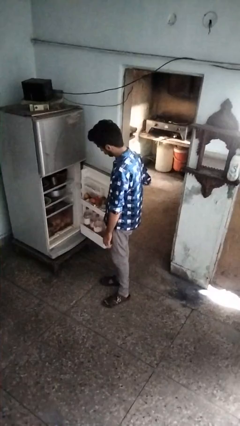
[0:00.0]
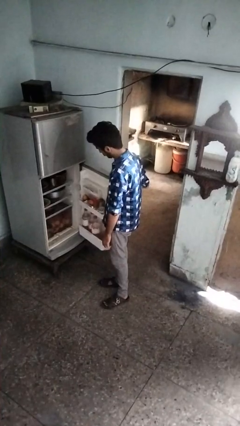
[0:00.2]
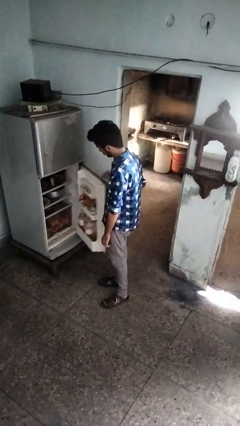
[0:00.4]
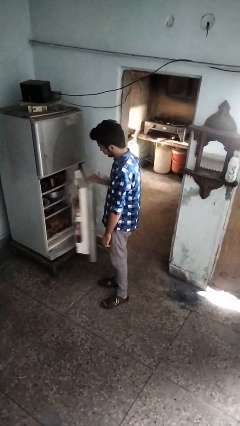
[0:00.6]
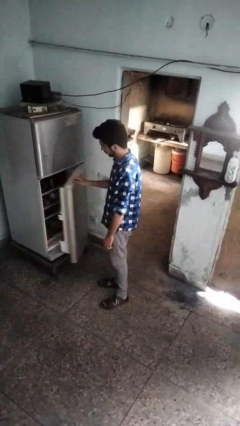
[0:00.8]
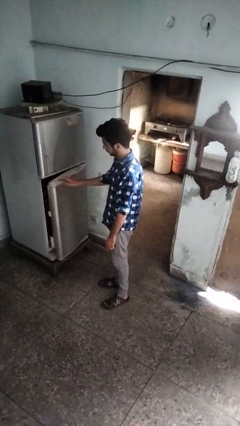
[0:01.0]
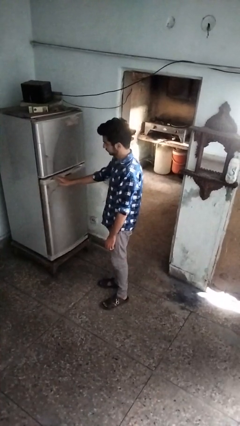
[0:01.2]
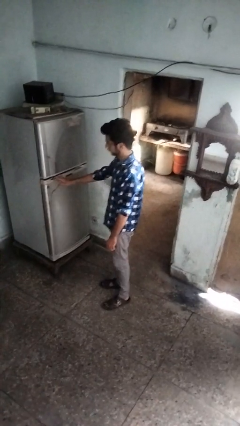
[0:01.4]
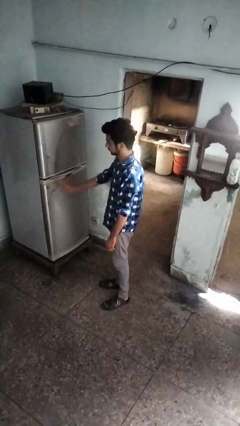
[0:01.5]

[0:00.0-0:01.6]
person closes refrigerator

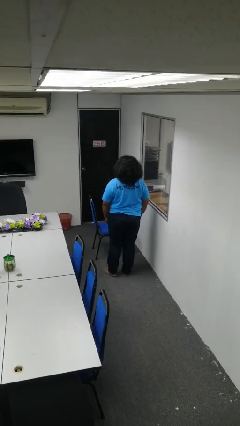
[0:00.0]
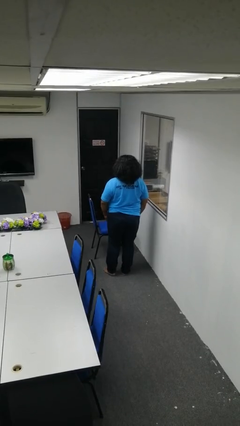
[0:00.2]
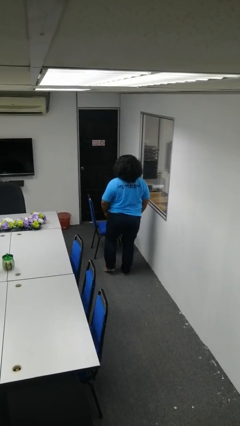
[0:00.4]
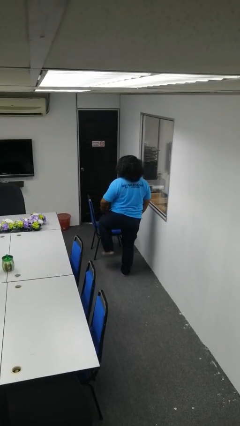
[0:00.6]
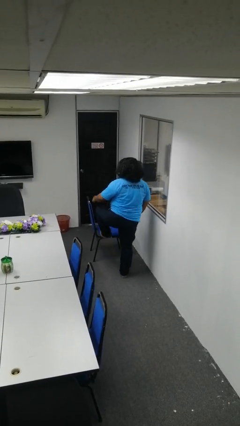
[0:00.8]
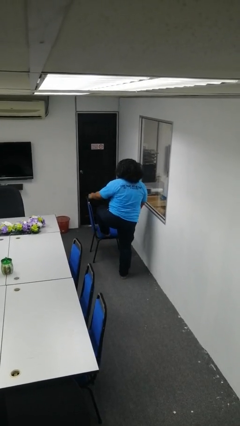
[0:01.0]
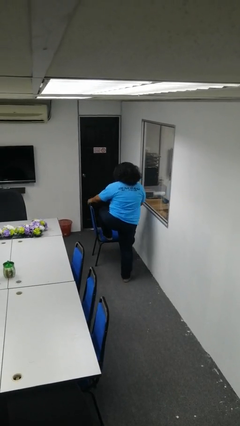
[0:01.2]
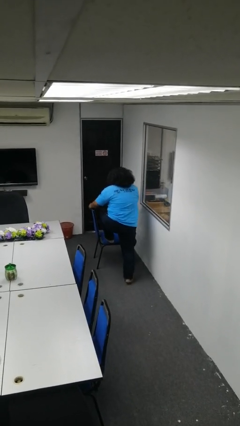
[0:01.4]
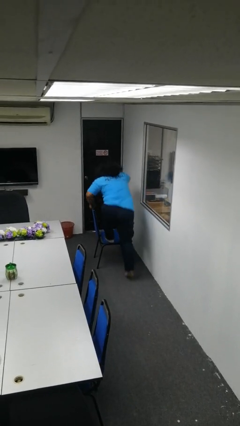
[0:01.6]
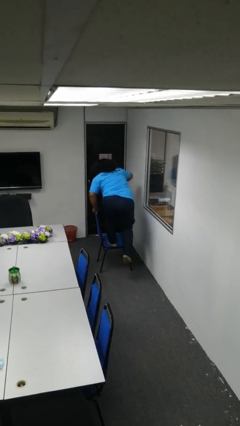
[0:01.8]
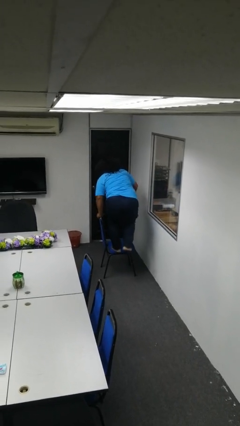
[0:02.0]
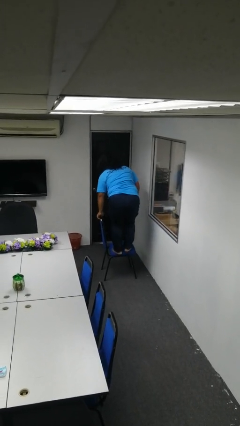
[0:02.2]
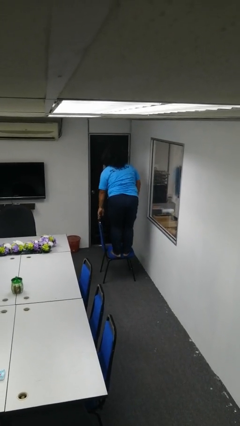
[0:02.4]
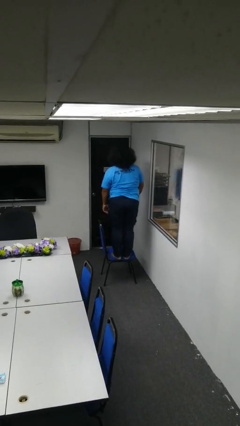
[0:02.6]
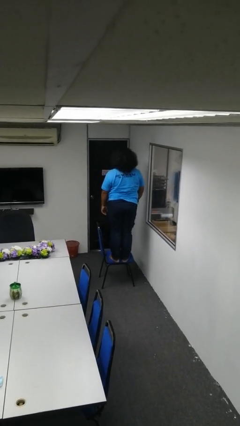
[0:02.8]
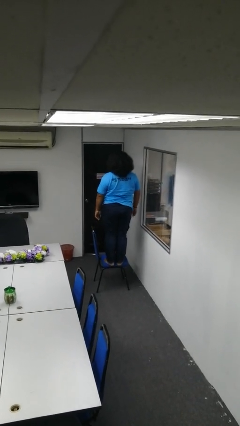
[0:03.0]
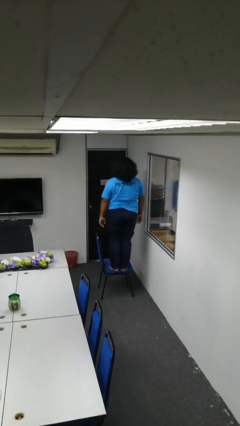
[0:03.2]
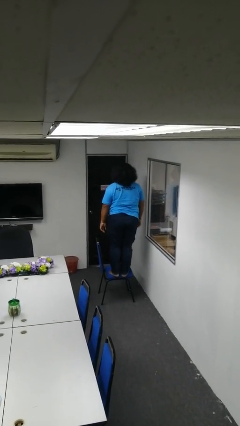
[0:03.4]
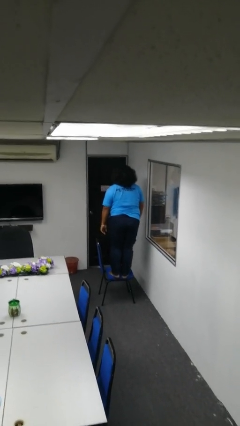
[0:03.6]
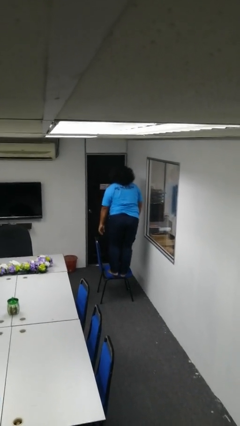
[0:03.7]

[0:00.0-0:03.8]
person climbs on chair

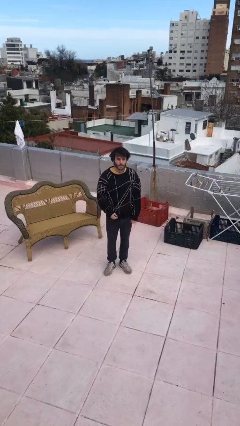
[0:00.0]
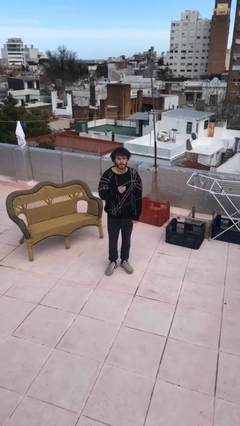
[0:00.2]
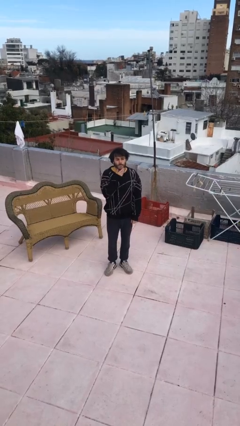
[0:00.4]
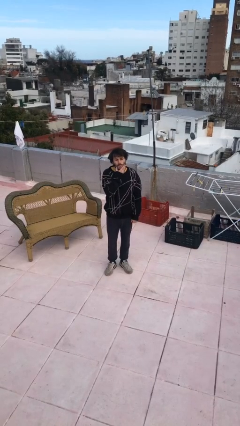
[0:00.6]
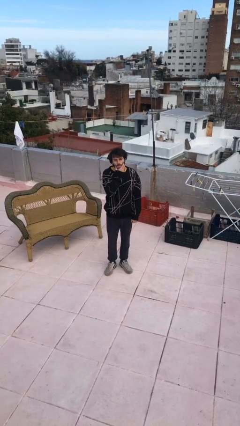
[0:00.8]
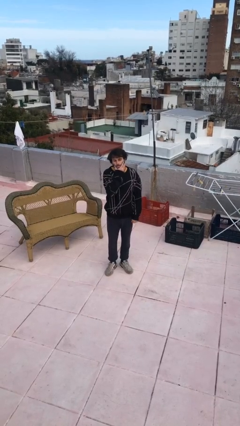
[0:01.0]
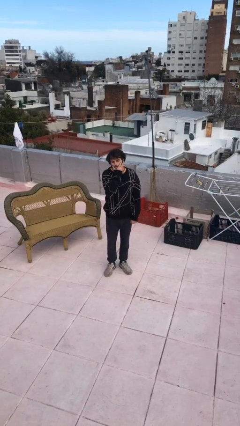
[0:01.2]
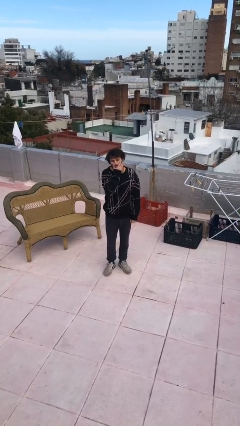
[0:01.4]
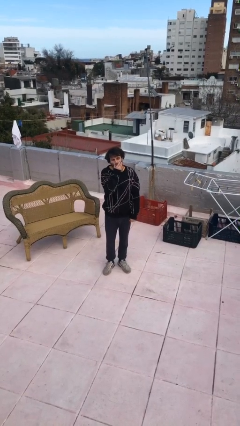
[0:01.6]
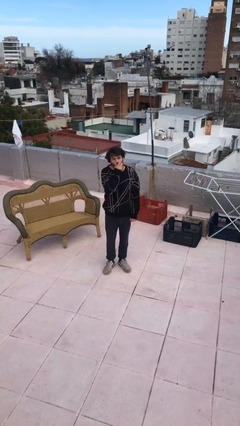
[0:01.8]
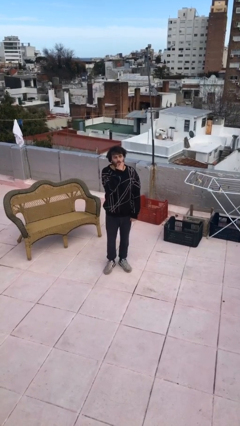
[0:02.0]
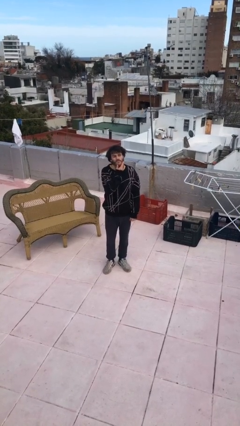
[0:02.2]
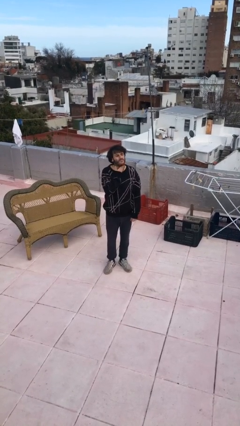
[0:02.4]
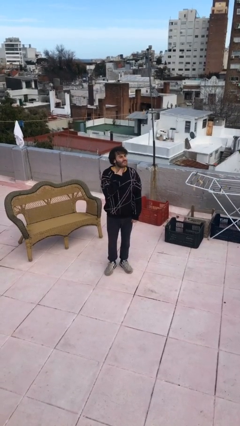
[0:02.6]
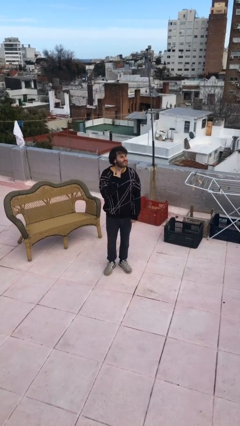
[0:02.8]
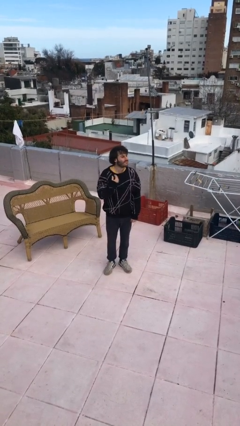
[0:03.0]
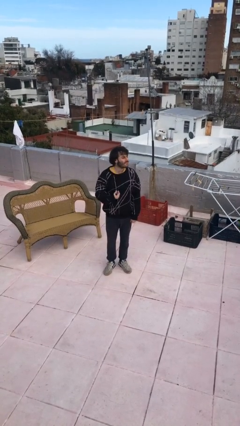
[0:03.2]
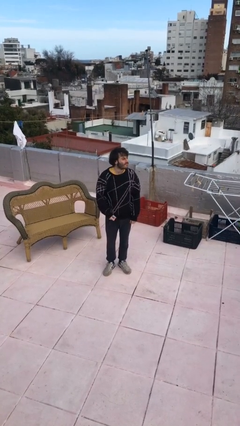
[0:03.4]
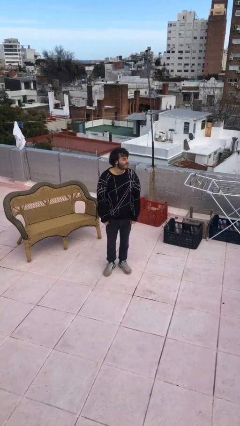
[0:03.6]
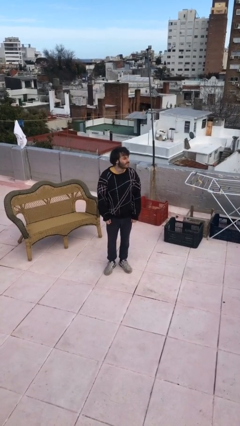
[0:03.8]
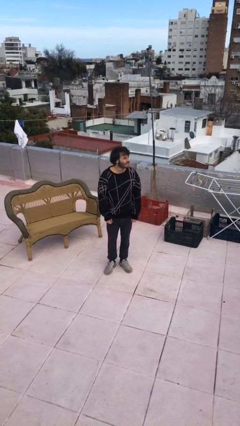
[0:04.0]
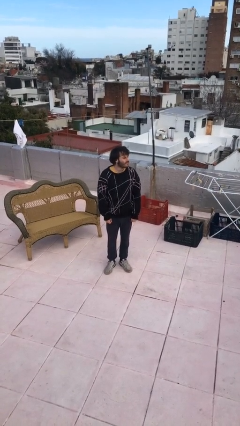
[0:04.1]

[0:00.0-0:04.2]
person scratches face

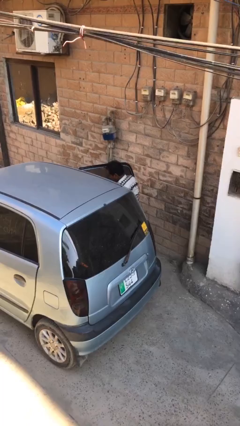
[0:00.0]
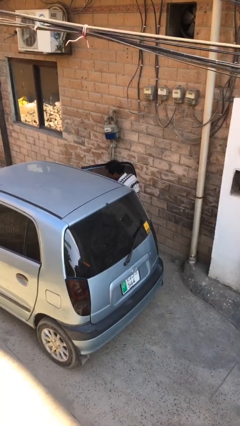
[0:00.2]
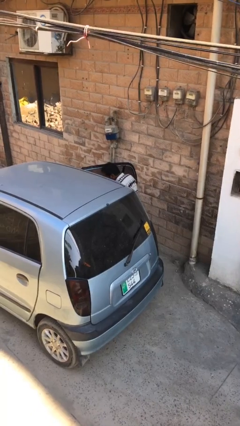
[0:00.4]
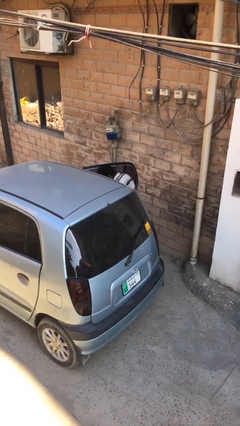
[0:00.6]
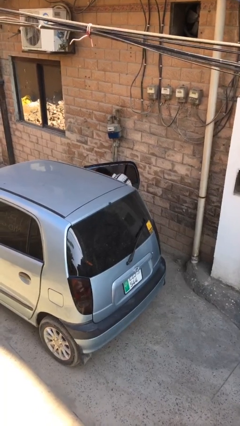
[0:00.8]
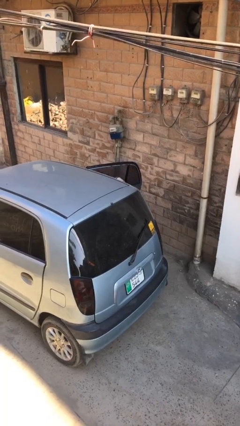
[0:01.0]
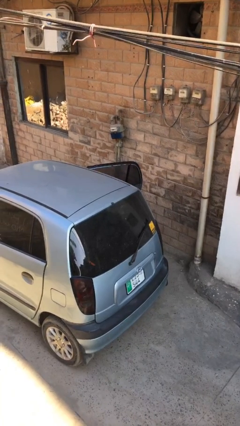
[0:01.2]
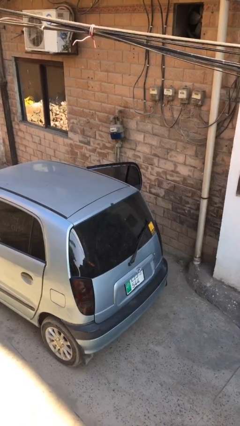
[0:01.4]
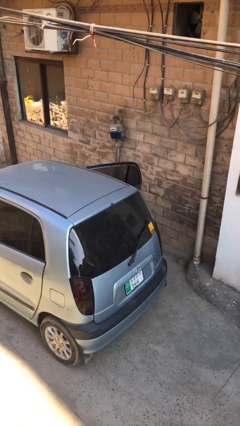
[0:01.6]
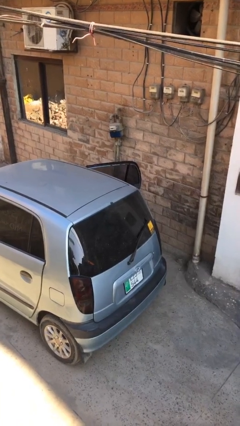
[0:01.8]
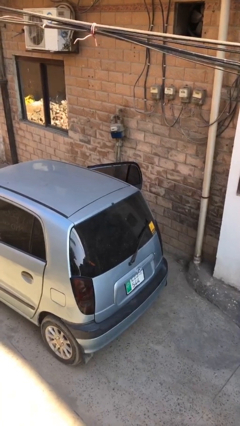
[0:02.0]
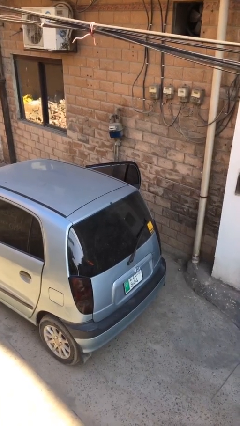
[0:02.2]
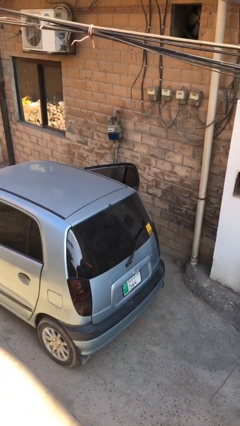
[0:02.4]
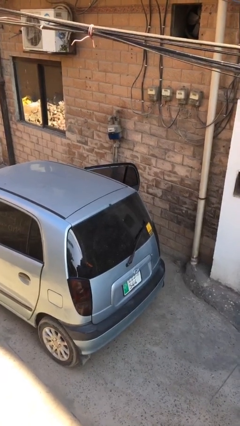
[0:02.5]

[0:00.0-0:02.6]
person enters car

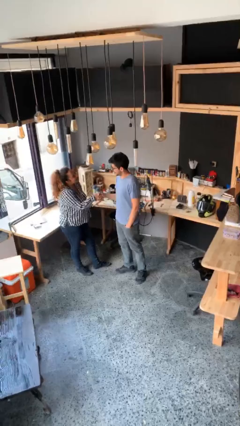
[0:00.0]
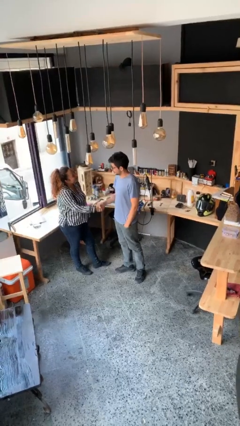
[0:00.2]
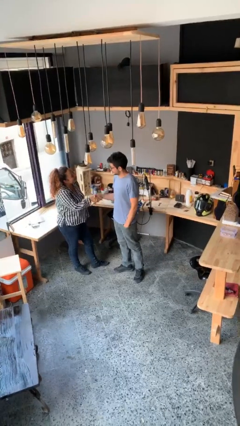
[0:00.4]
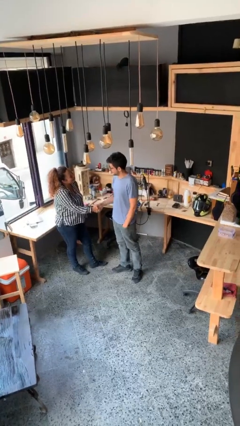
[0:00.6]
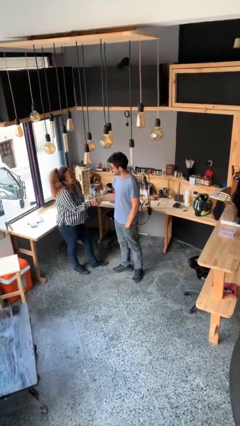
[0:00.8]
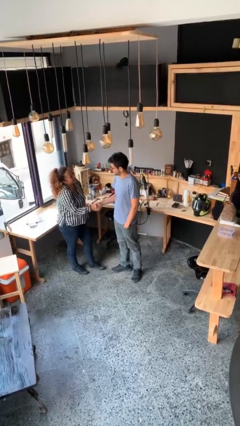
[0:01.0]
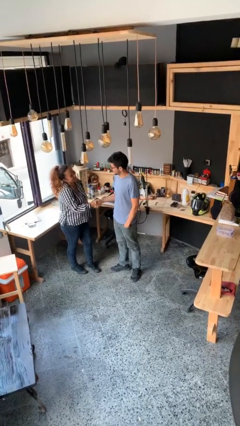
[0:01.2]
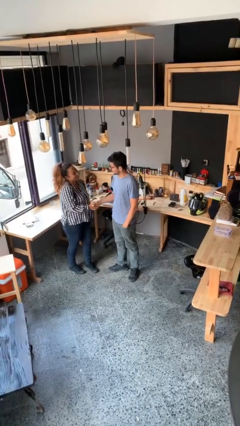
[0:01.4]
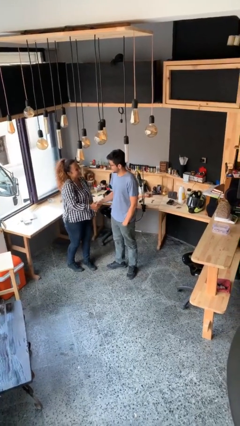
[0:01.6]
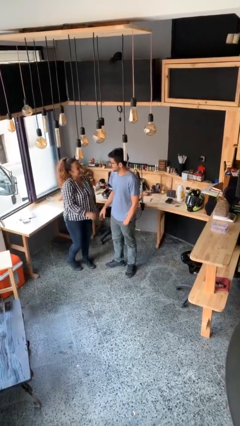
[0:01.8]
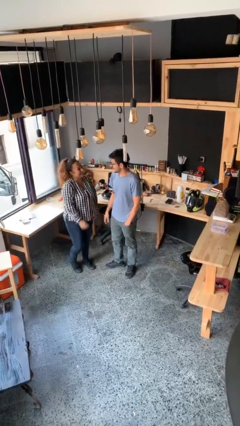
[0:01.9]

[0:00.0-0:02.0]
person shakes hand

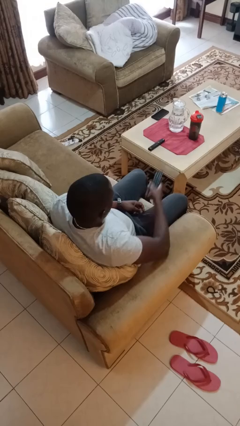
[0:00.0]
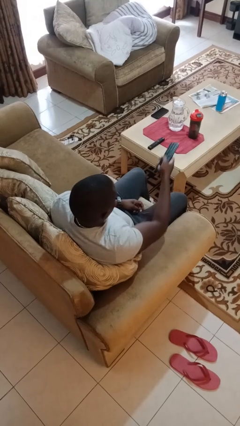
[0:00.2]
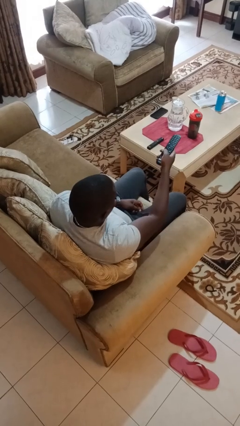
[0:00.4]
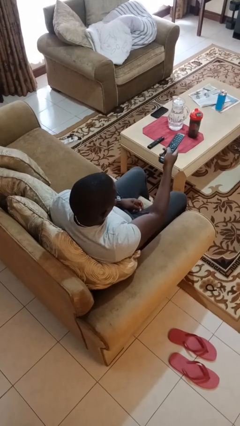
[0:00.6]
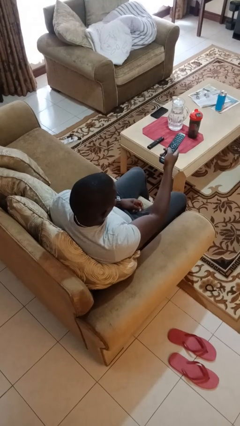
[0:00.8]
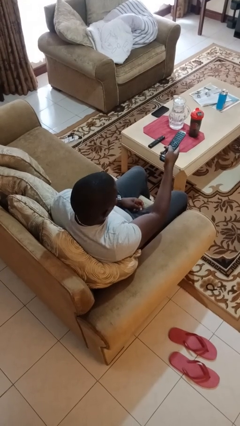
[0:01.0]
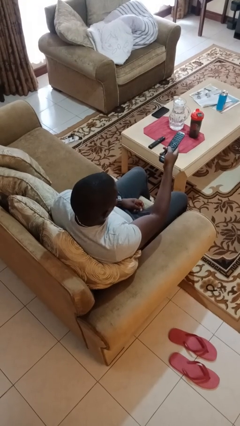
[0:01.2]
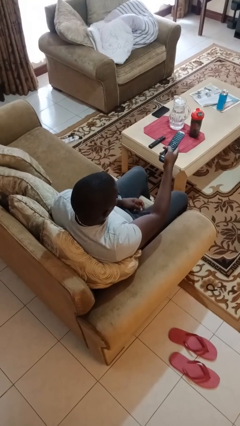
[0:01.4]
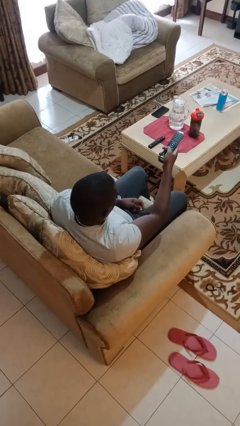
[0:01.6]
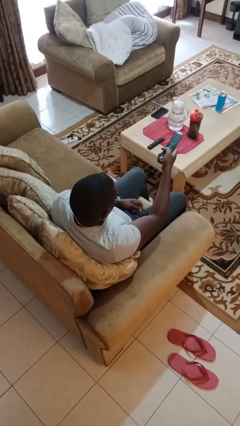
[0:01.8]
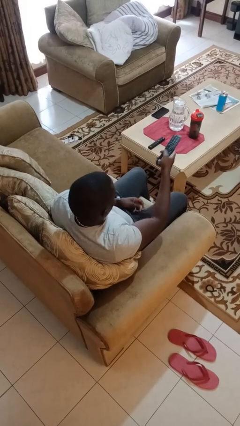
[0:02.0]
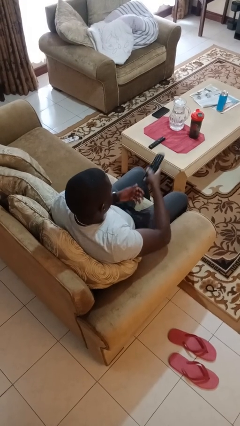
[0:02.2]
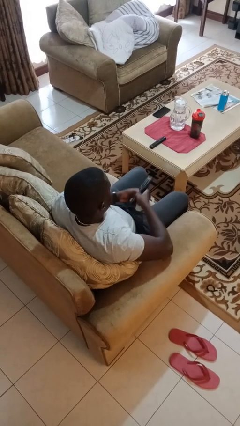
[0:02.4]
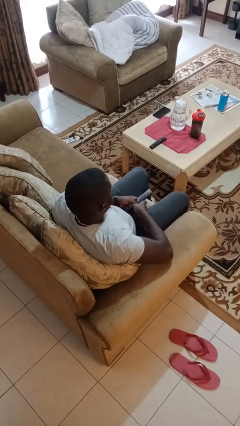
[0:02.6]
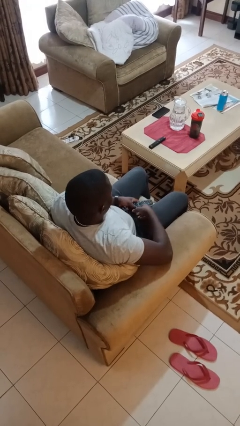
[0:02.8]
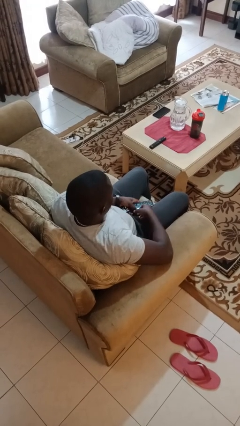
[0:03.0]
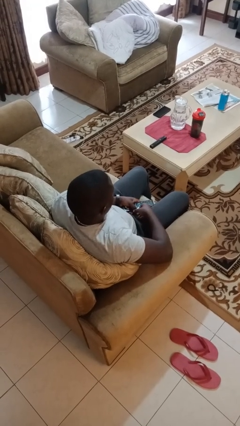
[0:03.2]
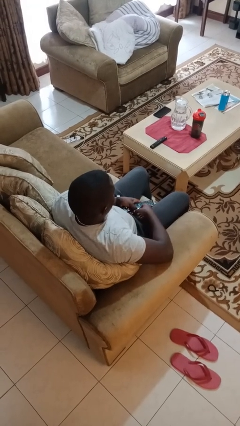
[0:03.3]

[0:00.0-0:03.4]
person uses television remote
